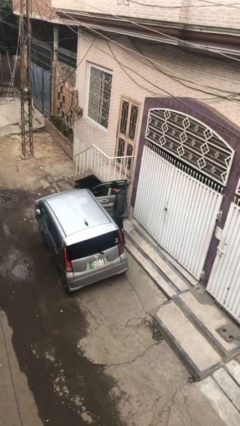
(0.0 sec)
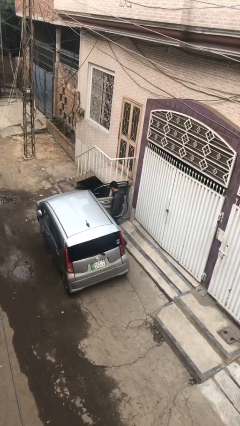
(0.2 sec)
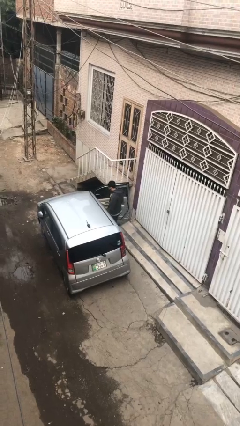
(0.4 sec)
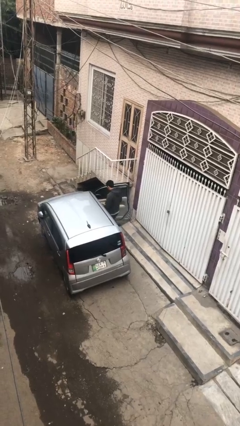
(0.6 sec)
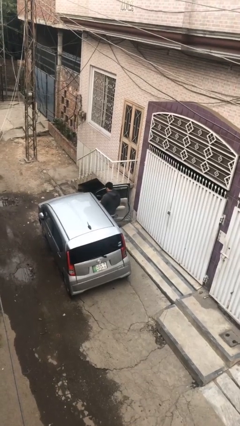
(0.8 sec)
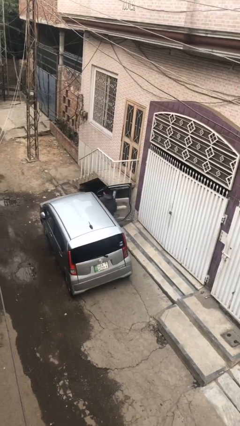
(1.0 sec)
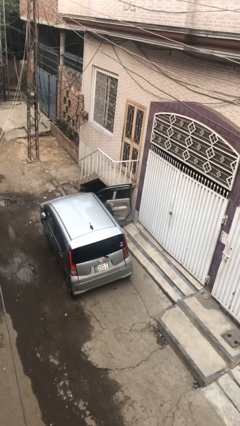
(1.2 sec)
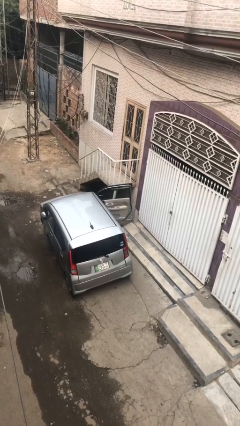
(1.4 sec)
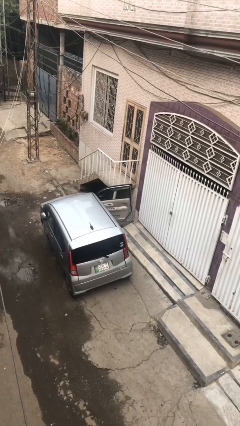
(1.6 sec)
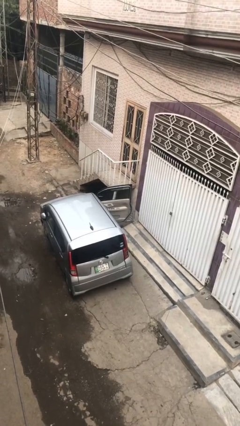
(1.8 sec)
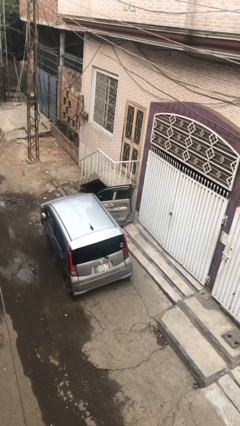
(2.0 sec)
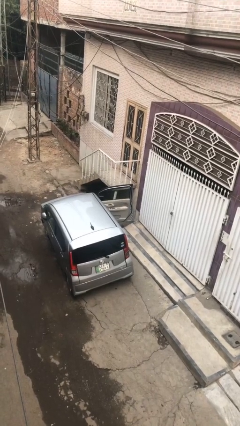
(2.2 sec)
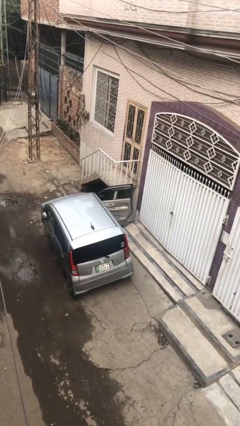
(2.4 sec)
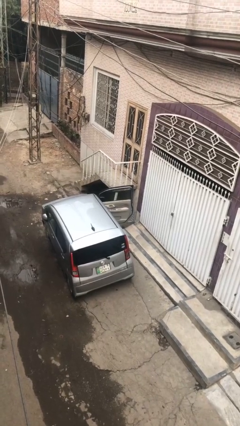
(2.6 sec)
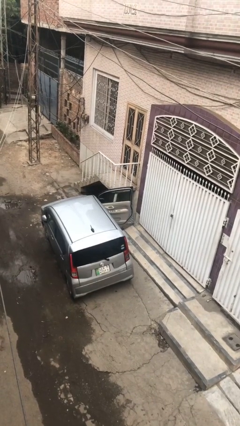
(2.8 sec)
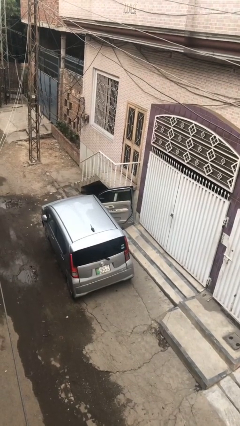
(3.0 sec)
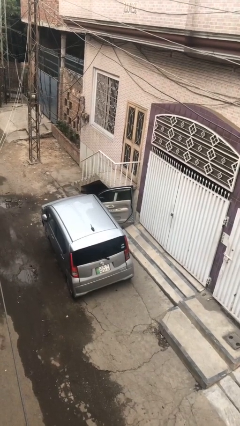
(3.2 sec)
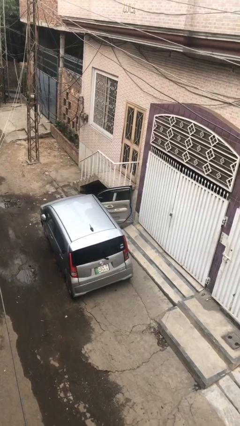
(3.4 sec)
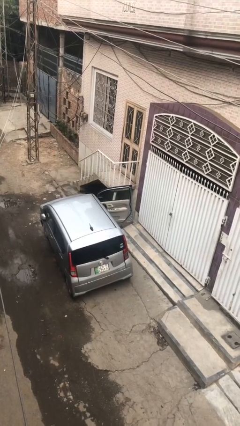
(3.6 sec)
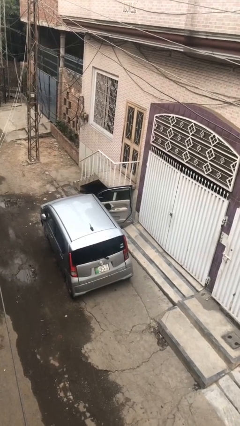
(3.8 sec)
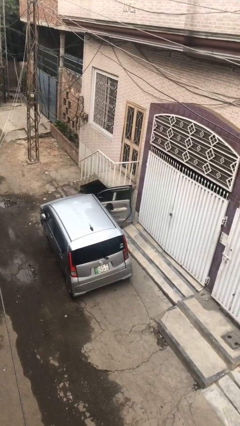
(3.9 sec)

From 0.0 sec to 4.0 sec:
person enters car

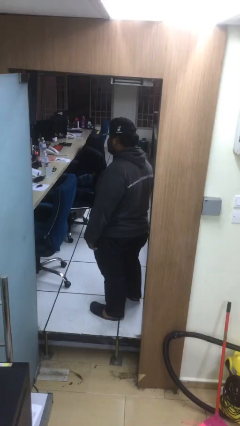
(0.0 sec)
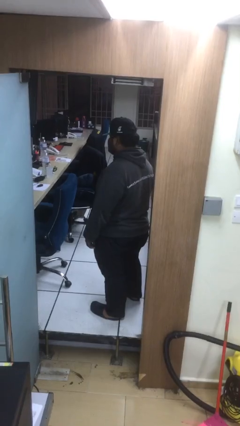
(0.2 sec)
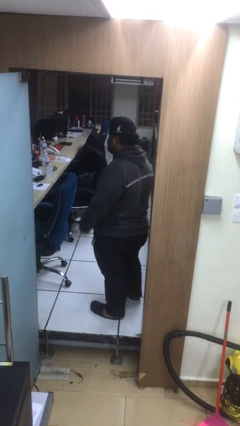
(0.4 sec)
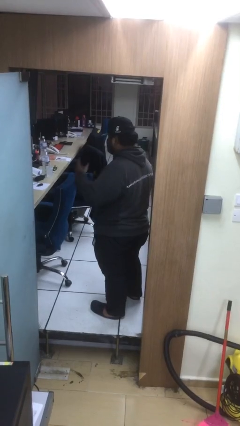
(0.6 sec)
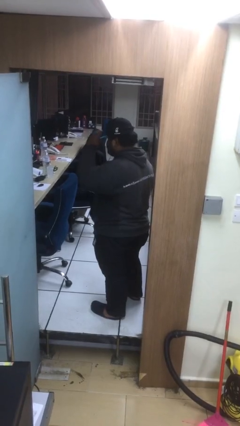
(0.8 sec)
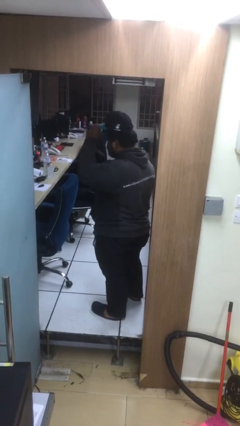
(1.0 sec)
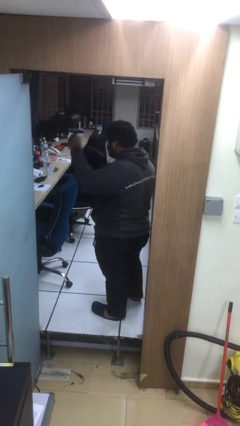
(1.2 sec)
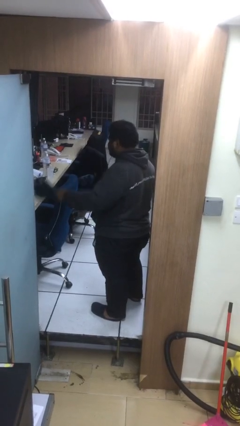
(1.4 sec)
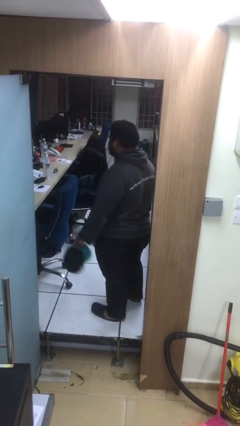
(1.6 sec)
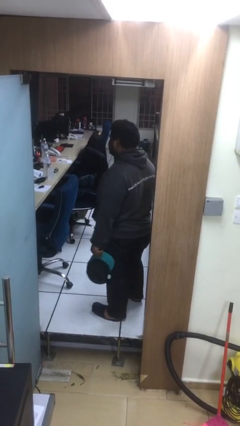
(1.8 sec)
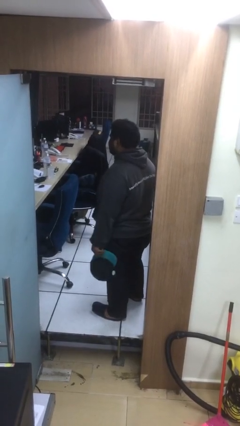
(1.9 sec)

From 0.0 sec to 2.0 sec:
person takes off hat

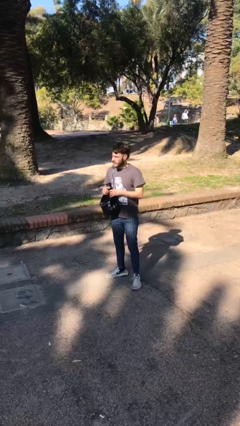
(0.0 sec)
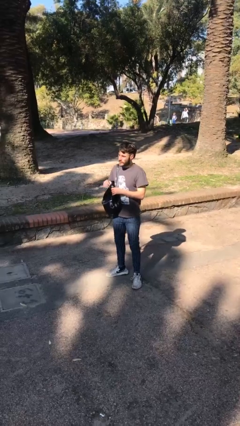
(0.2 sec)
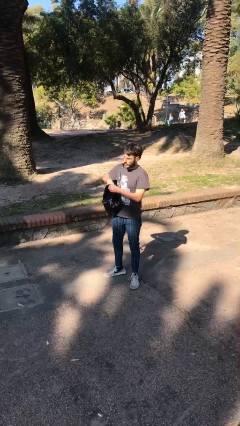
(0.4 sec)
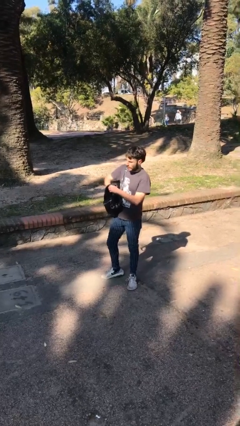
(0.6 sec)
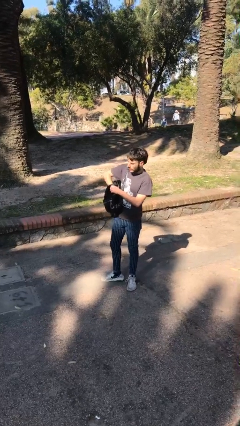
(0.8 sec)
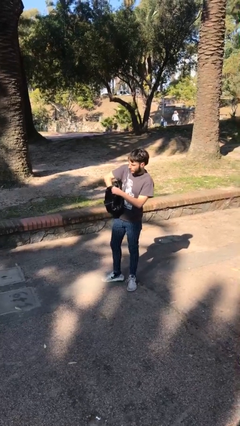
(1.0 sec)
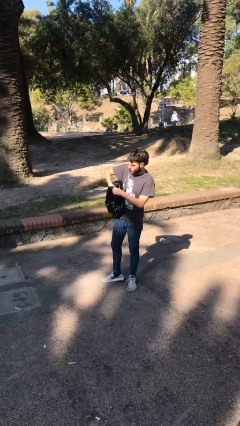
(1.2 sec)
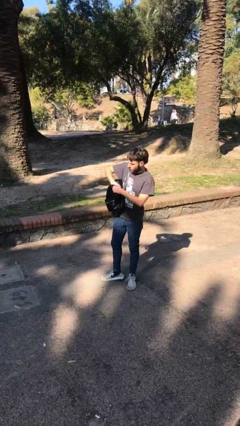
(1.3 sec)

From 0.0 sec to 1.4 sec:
person searches in backpack

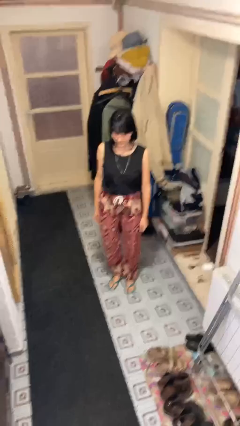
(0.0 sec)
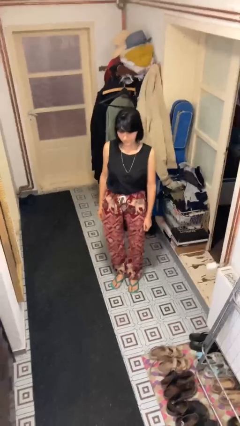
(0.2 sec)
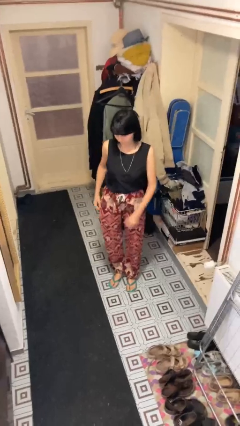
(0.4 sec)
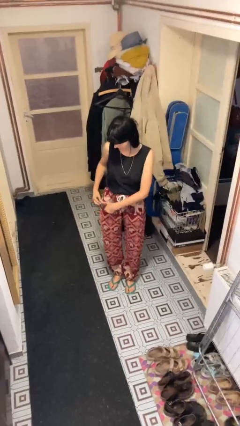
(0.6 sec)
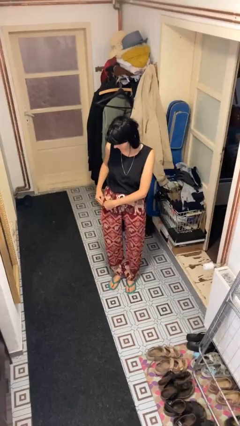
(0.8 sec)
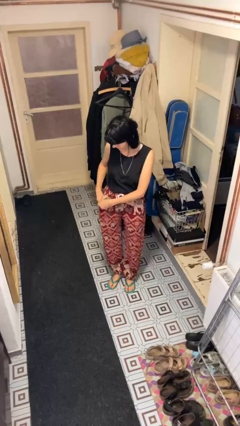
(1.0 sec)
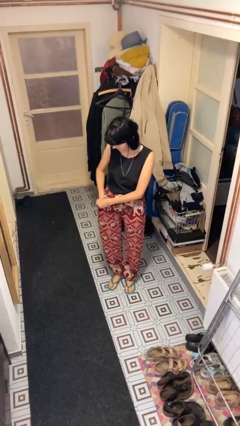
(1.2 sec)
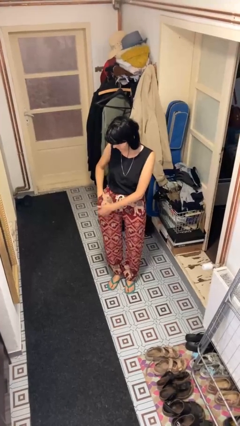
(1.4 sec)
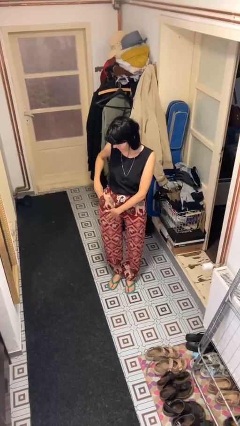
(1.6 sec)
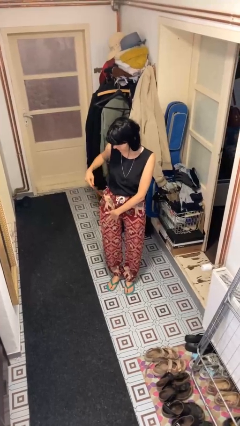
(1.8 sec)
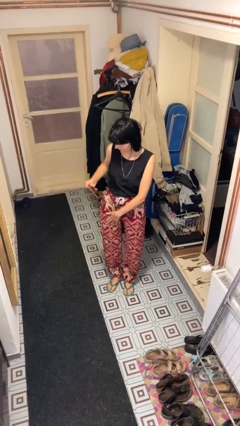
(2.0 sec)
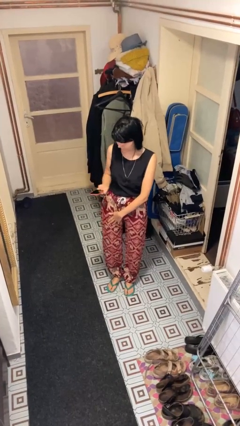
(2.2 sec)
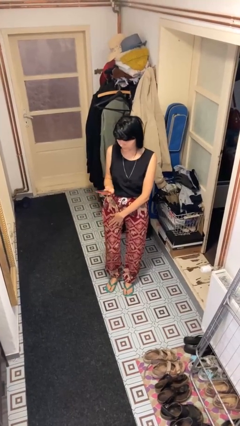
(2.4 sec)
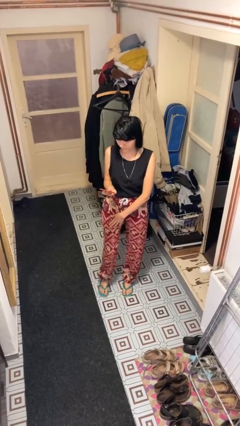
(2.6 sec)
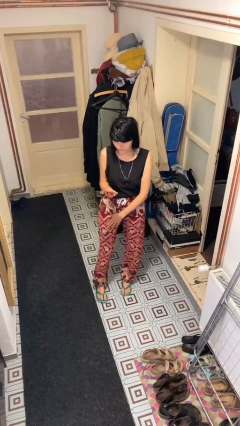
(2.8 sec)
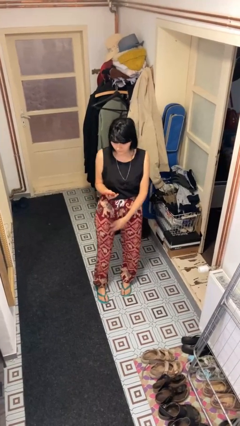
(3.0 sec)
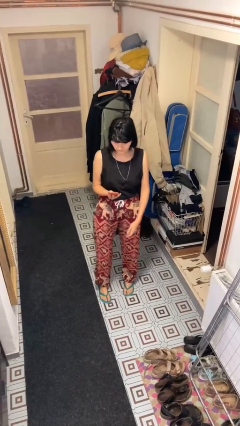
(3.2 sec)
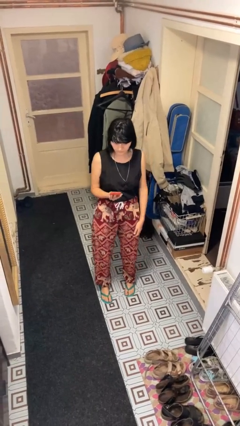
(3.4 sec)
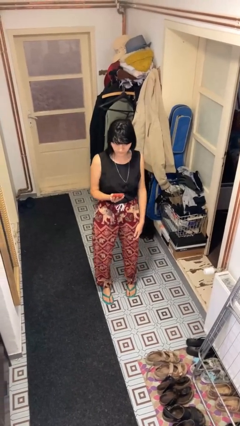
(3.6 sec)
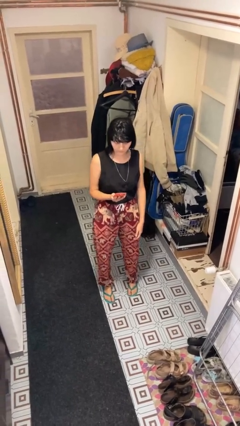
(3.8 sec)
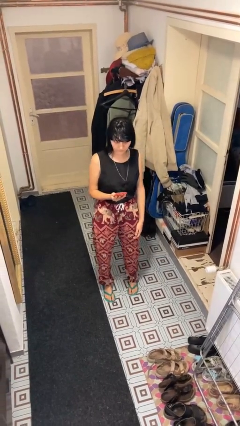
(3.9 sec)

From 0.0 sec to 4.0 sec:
person takes phone from pocket

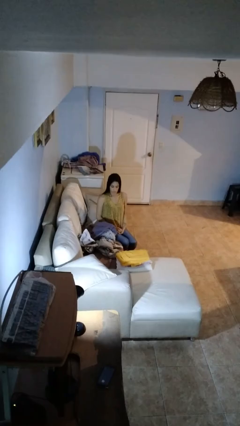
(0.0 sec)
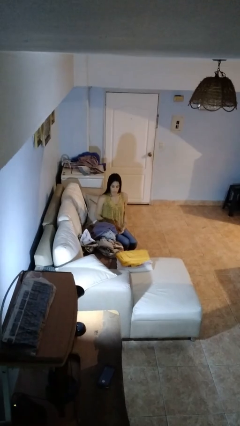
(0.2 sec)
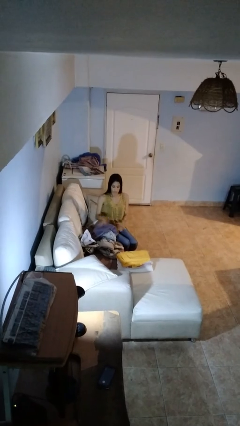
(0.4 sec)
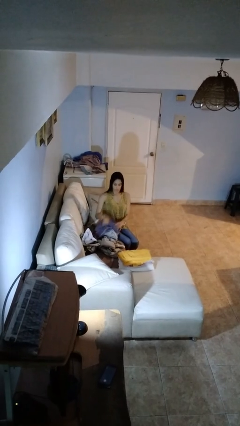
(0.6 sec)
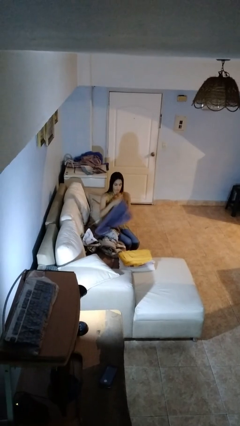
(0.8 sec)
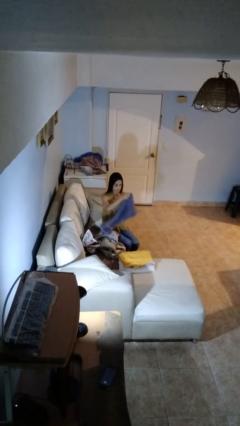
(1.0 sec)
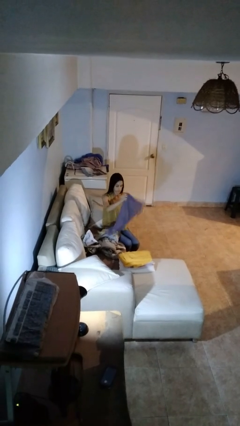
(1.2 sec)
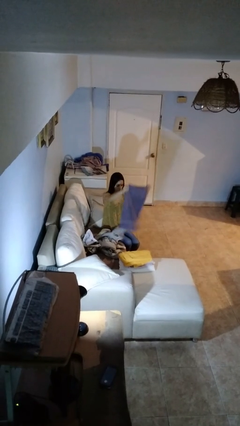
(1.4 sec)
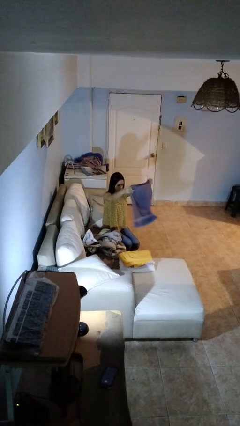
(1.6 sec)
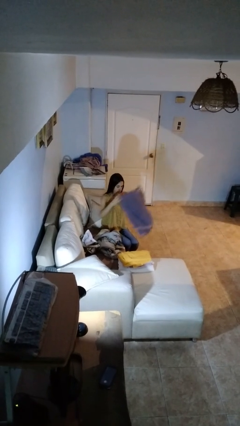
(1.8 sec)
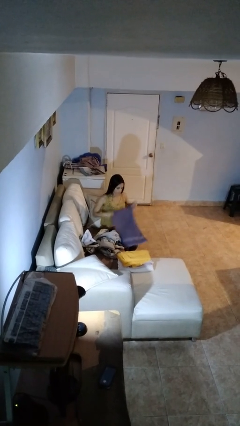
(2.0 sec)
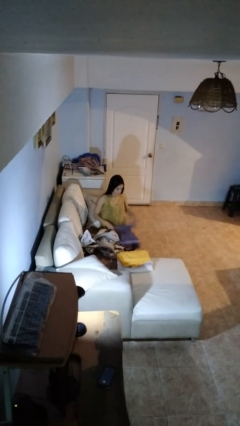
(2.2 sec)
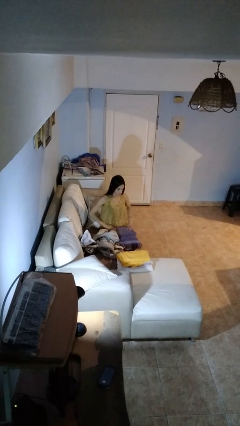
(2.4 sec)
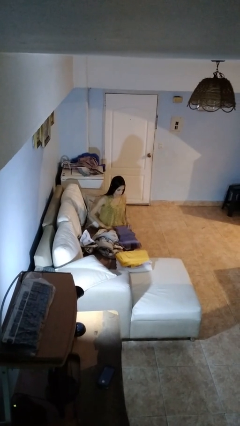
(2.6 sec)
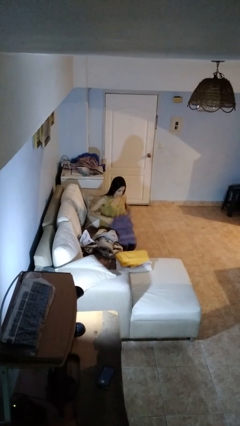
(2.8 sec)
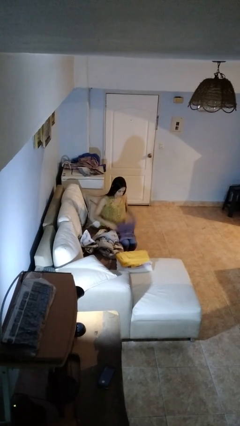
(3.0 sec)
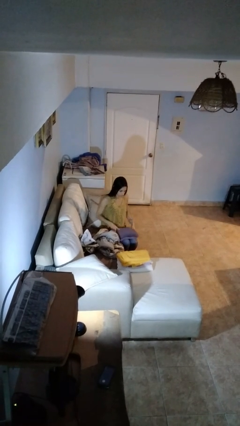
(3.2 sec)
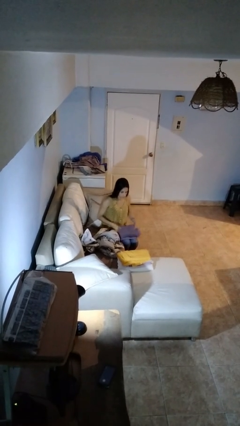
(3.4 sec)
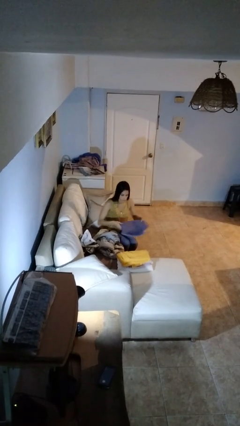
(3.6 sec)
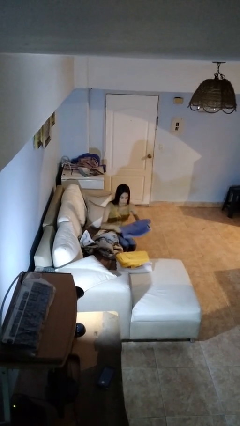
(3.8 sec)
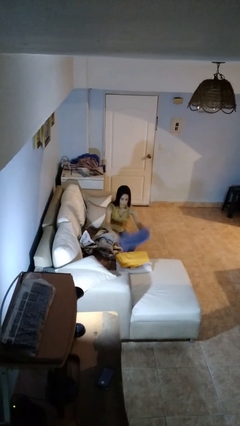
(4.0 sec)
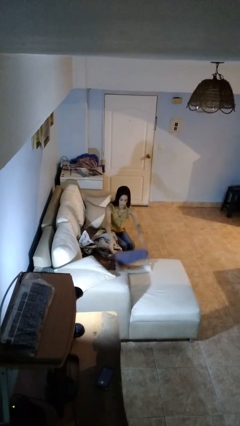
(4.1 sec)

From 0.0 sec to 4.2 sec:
person folds towel

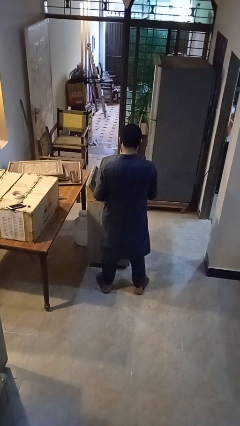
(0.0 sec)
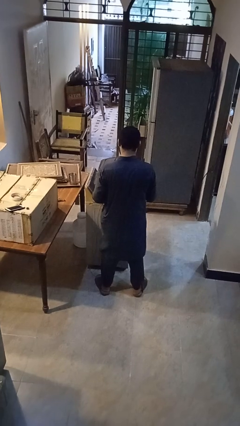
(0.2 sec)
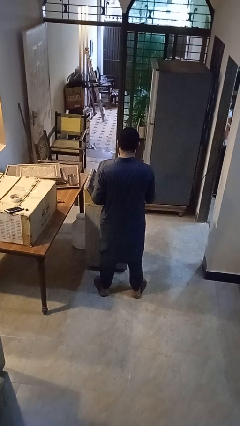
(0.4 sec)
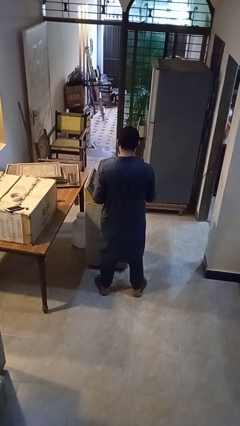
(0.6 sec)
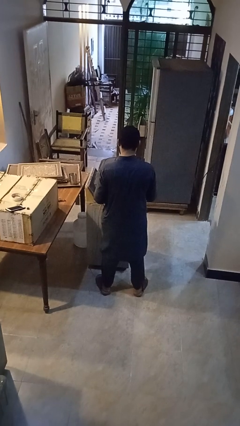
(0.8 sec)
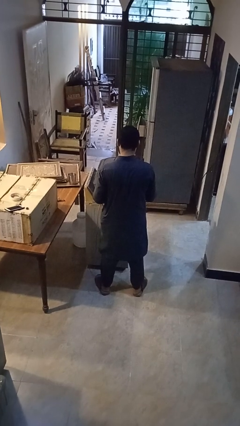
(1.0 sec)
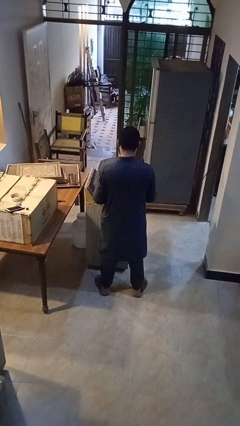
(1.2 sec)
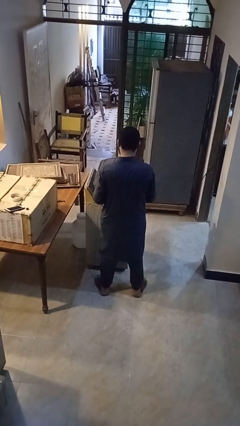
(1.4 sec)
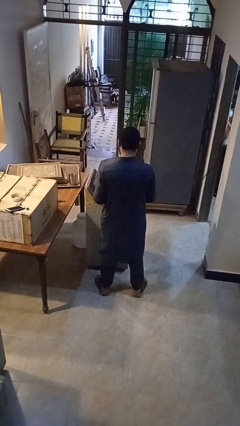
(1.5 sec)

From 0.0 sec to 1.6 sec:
person closes suitcase

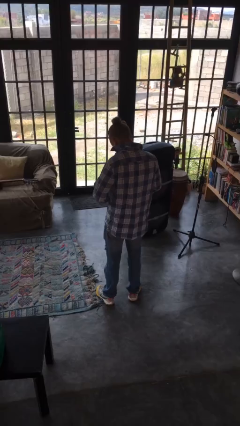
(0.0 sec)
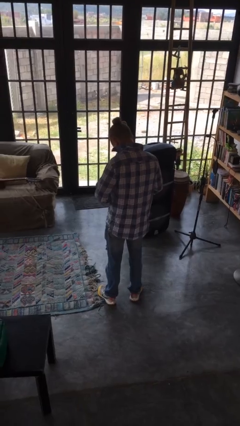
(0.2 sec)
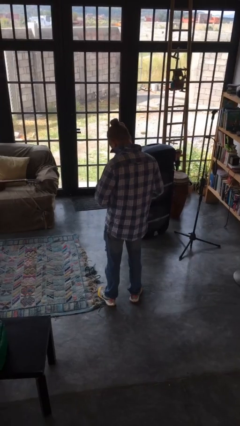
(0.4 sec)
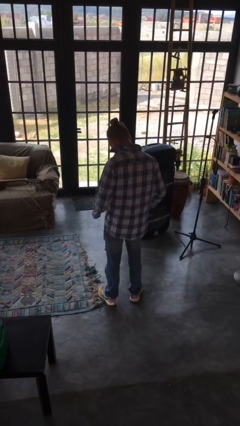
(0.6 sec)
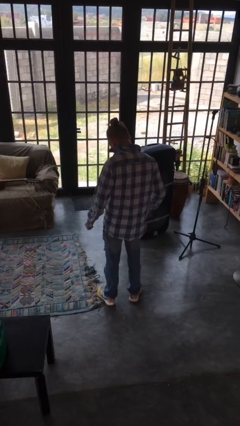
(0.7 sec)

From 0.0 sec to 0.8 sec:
person unbuttons shirt
